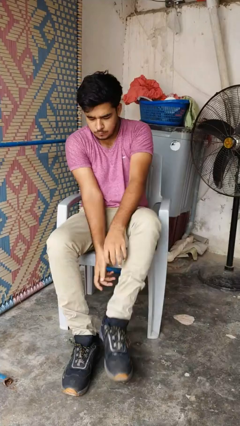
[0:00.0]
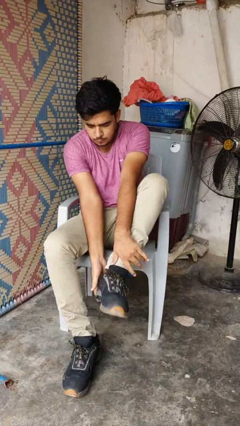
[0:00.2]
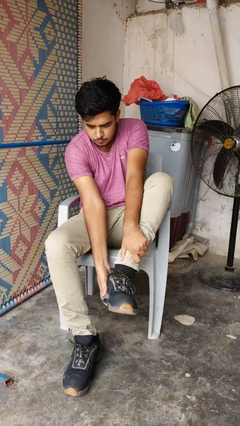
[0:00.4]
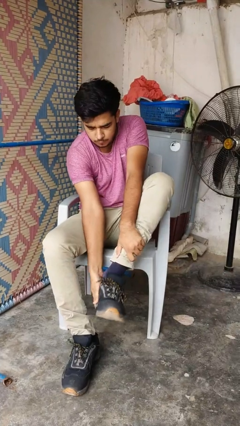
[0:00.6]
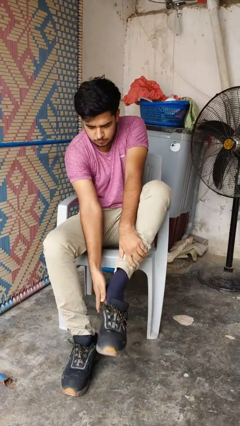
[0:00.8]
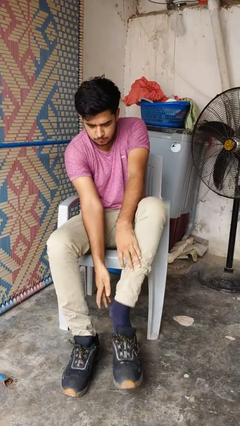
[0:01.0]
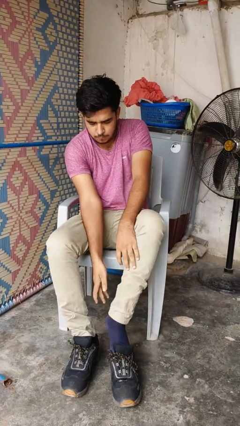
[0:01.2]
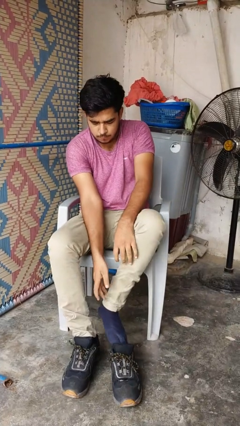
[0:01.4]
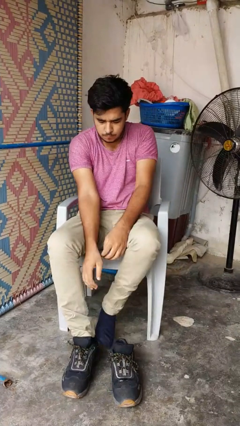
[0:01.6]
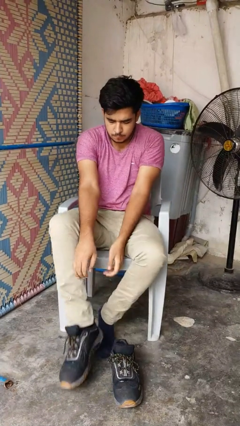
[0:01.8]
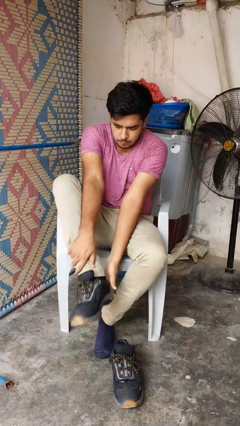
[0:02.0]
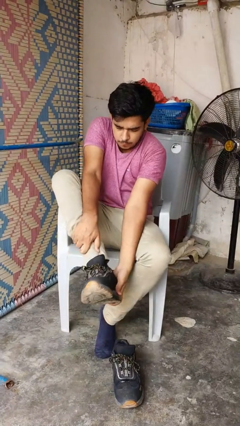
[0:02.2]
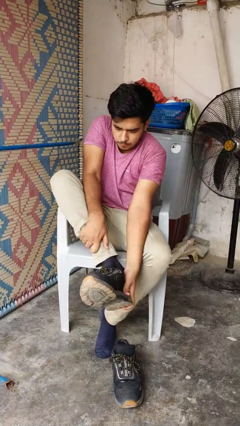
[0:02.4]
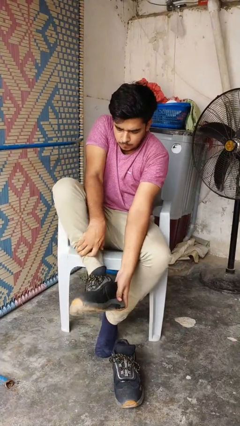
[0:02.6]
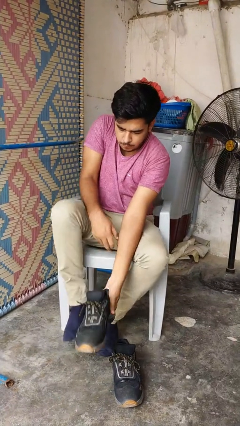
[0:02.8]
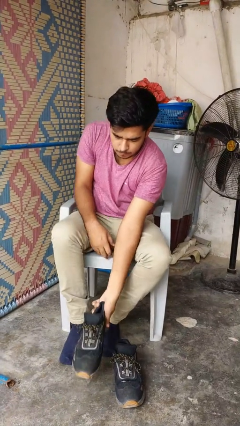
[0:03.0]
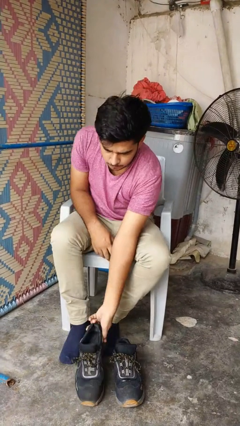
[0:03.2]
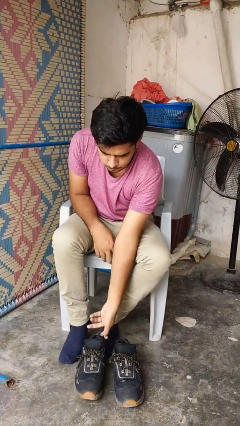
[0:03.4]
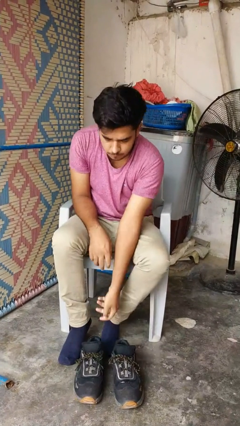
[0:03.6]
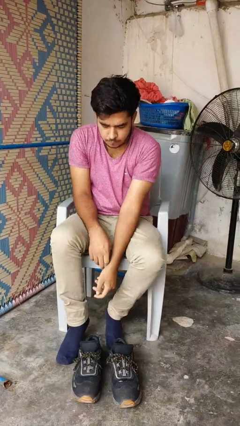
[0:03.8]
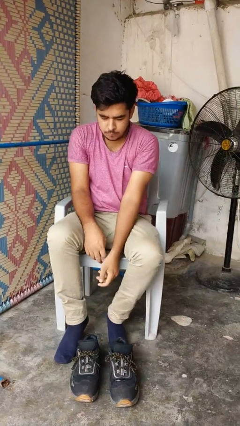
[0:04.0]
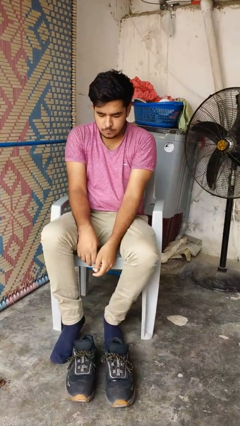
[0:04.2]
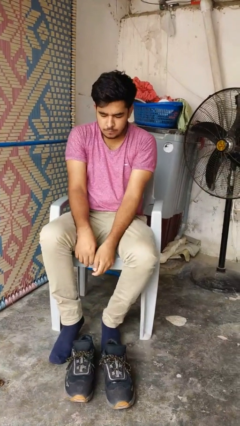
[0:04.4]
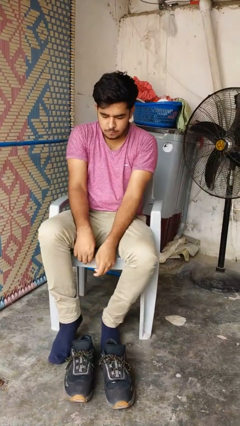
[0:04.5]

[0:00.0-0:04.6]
person takes off boots

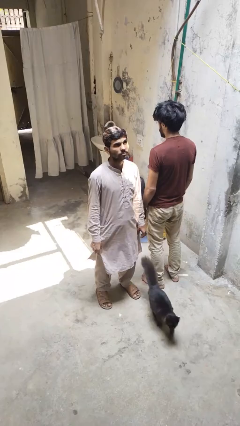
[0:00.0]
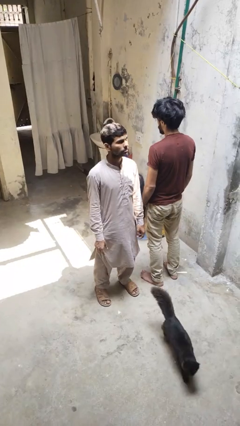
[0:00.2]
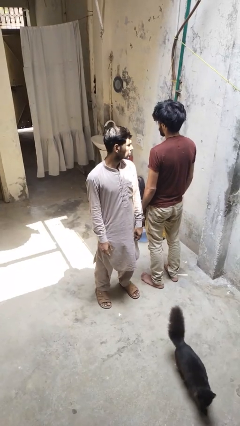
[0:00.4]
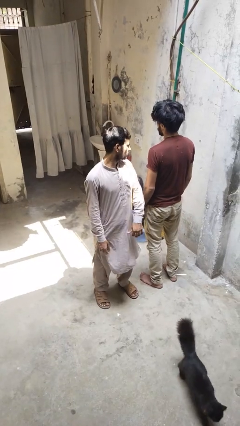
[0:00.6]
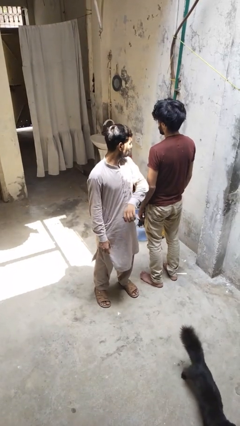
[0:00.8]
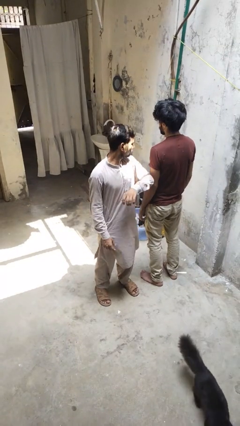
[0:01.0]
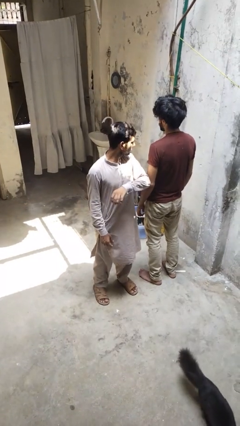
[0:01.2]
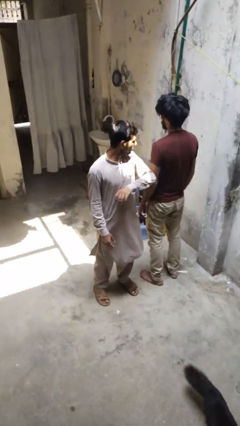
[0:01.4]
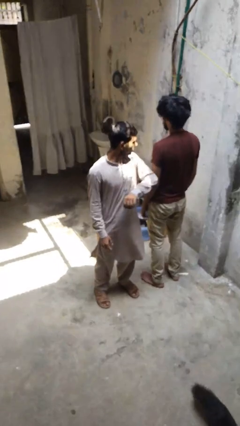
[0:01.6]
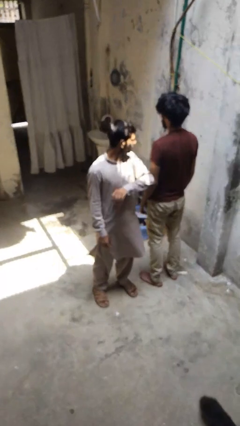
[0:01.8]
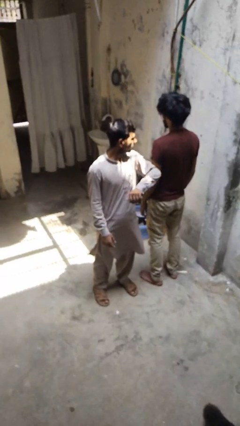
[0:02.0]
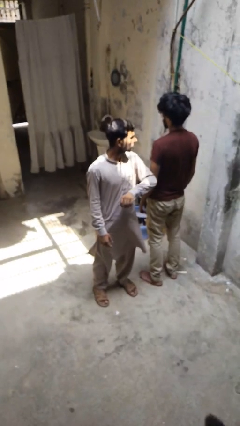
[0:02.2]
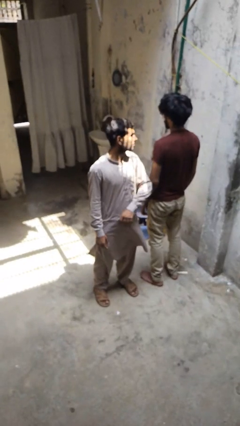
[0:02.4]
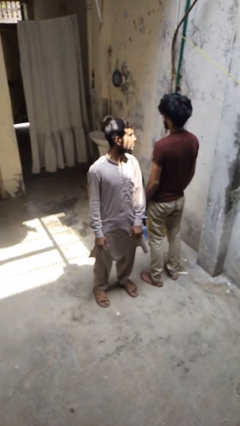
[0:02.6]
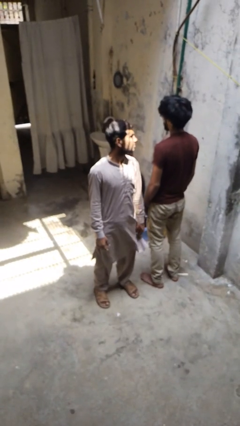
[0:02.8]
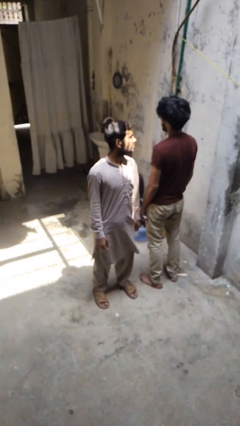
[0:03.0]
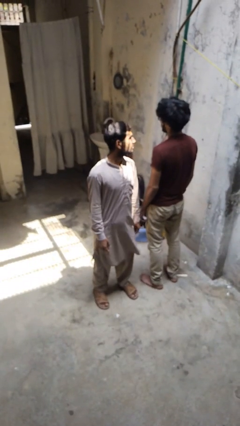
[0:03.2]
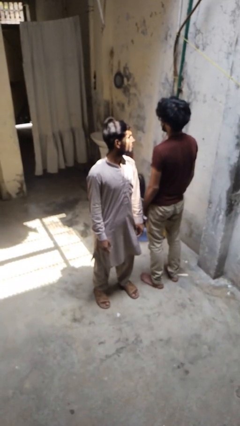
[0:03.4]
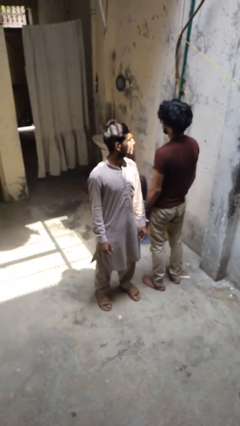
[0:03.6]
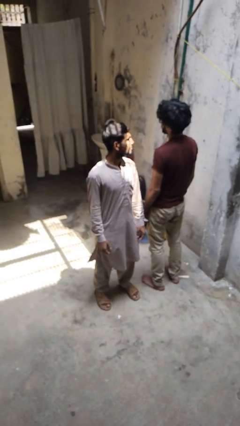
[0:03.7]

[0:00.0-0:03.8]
person nudges person with elbow

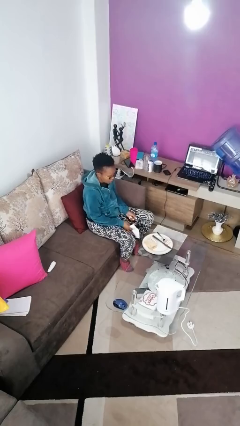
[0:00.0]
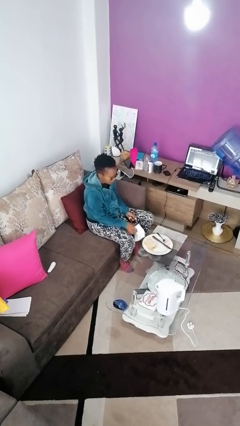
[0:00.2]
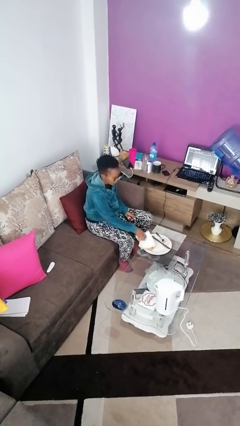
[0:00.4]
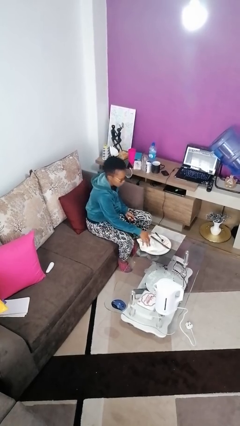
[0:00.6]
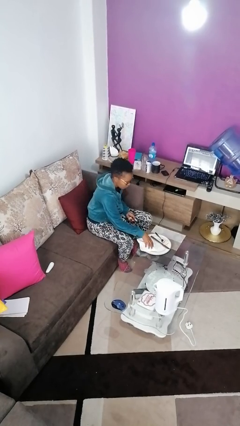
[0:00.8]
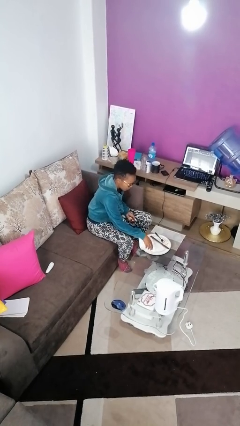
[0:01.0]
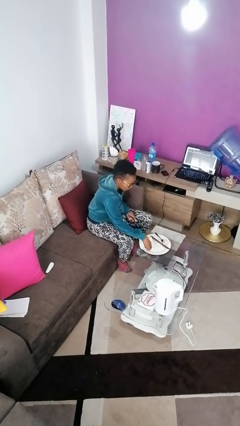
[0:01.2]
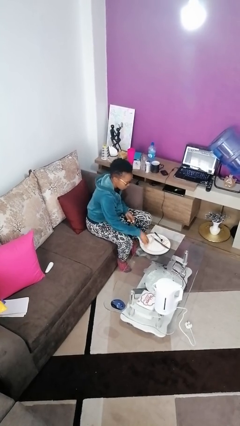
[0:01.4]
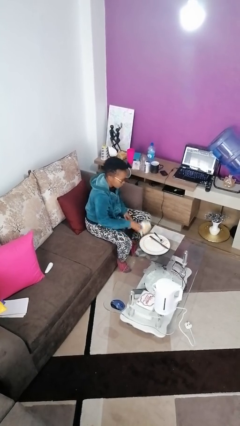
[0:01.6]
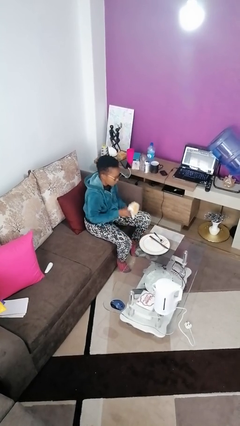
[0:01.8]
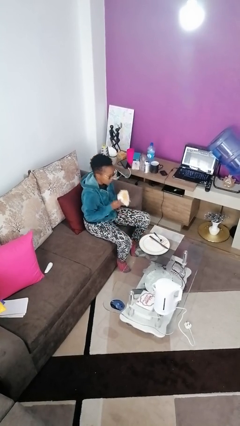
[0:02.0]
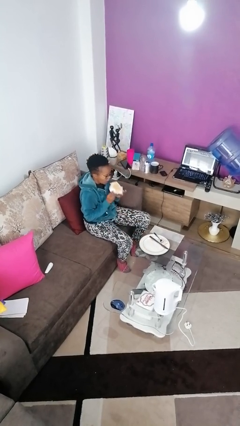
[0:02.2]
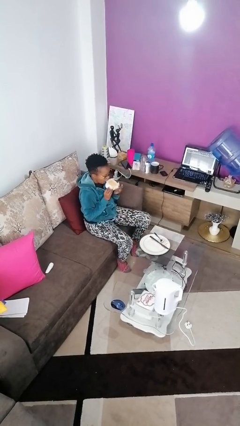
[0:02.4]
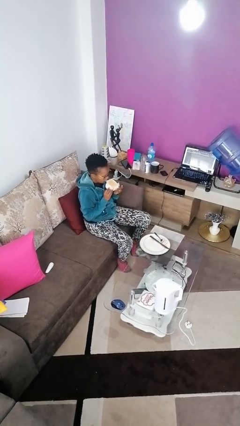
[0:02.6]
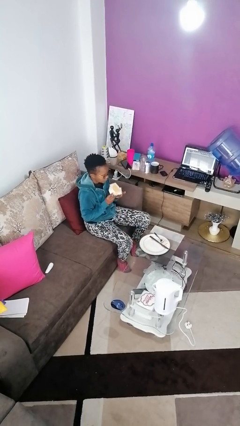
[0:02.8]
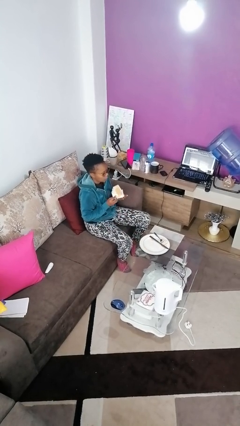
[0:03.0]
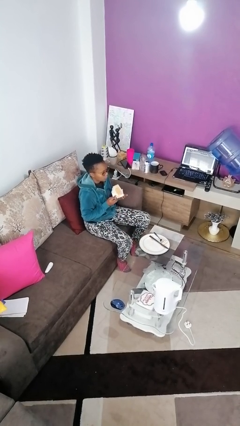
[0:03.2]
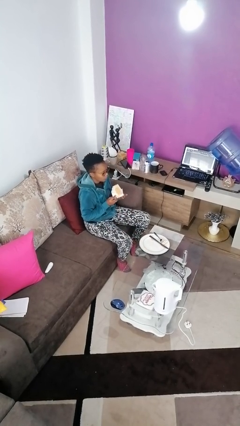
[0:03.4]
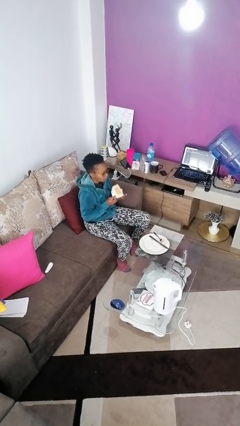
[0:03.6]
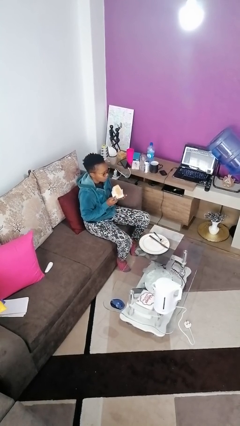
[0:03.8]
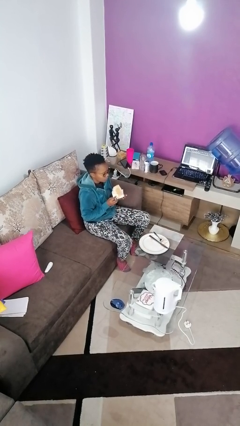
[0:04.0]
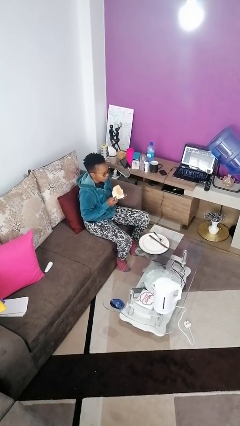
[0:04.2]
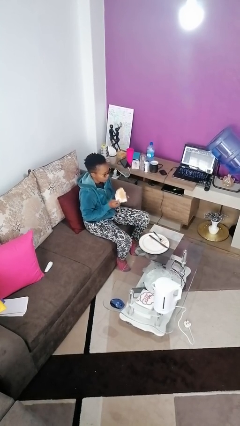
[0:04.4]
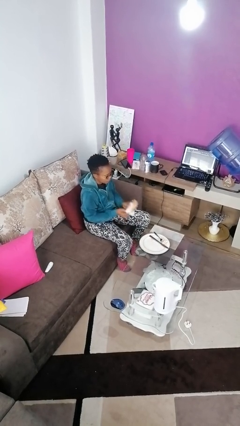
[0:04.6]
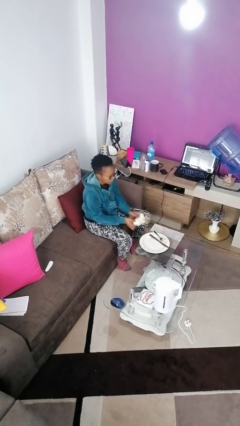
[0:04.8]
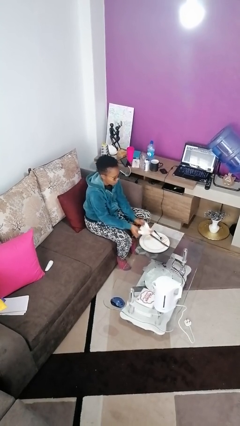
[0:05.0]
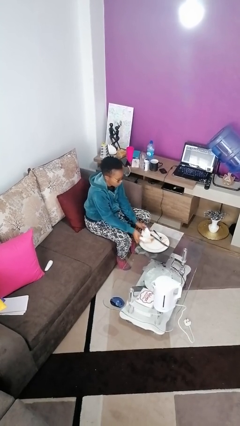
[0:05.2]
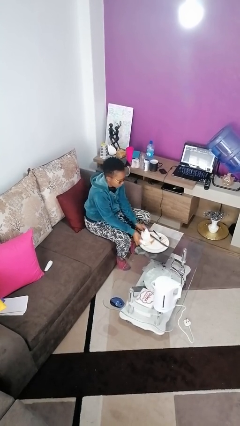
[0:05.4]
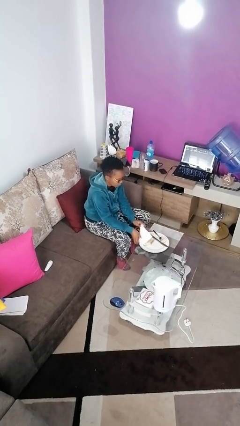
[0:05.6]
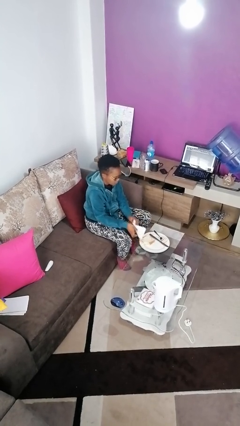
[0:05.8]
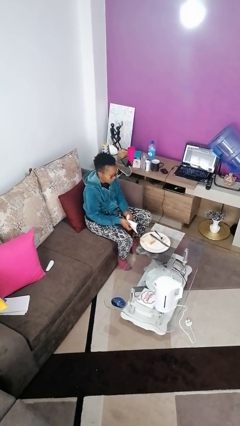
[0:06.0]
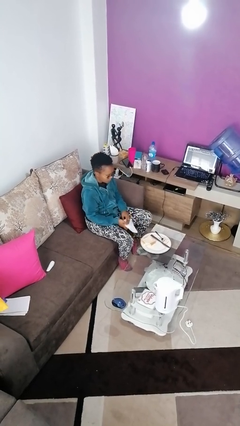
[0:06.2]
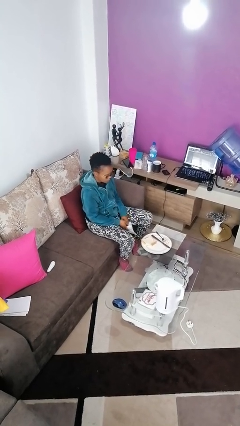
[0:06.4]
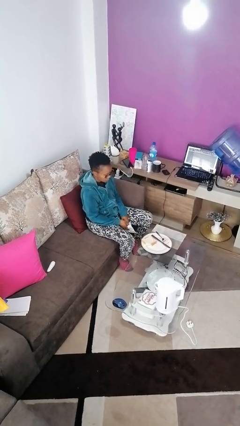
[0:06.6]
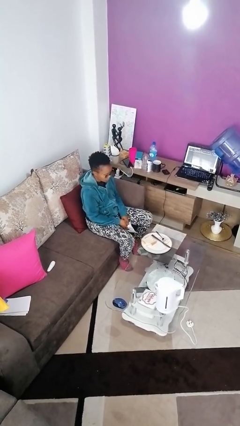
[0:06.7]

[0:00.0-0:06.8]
person eats with hands

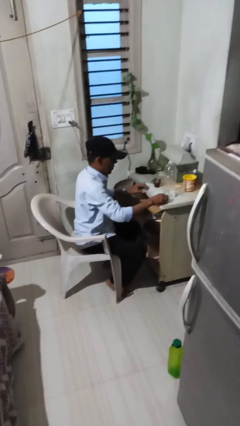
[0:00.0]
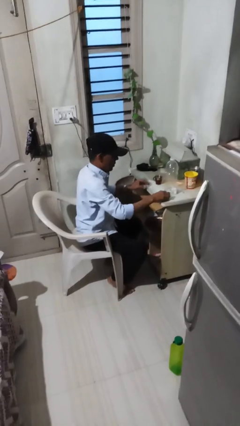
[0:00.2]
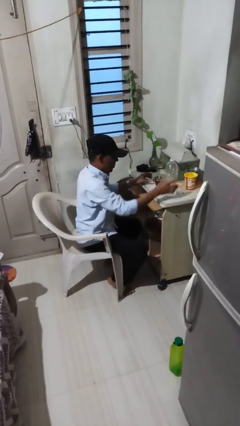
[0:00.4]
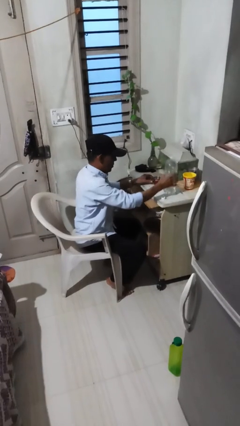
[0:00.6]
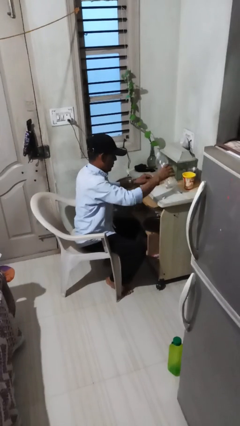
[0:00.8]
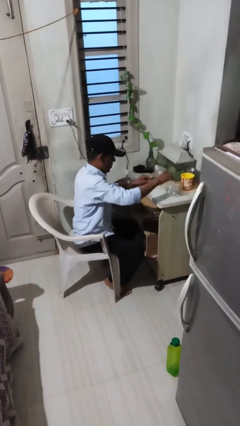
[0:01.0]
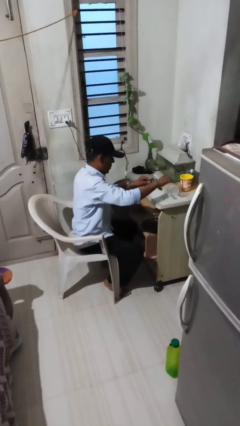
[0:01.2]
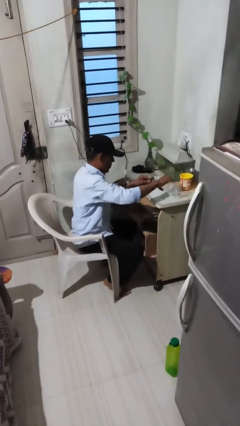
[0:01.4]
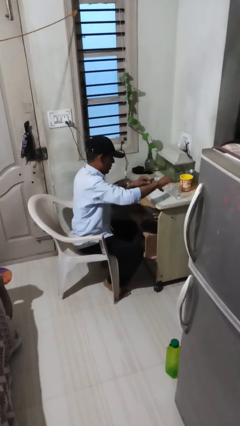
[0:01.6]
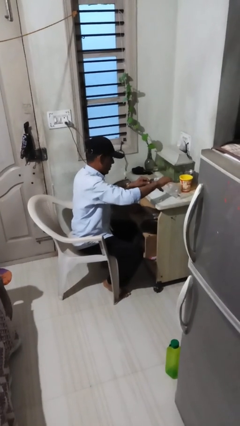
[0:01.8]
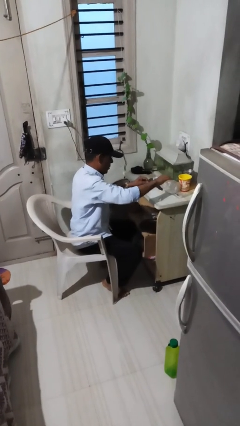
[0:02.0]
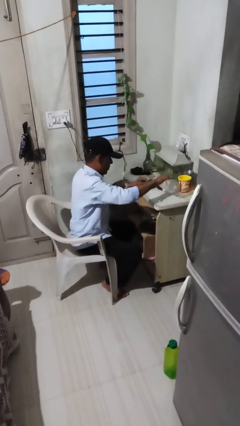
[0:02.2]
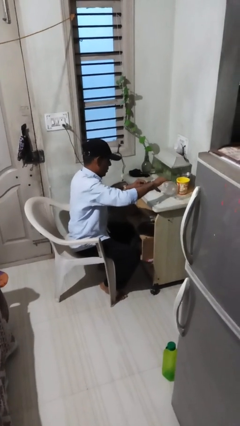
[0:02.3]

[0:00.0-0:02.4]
person pours liquid into cup
